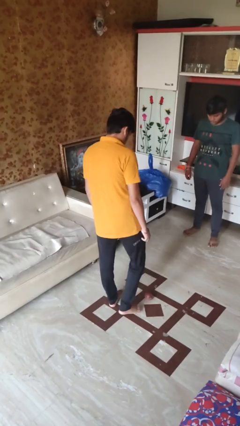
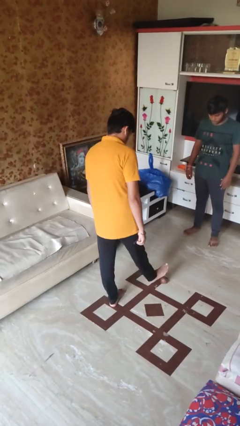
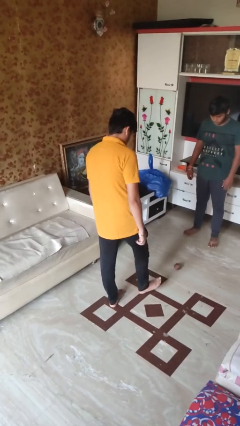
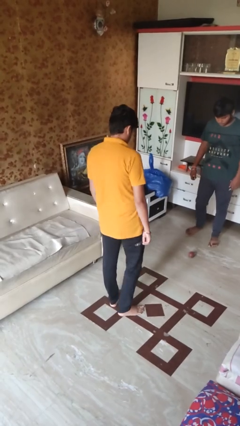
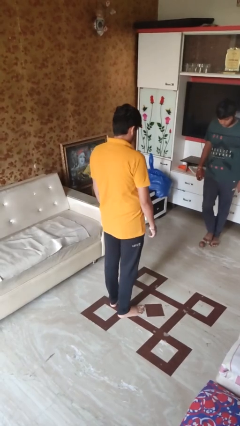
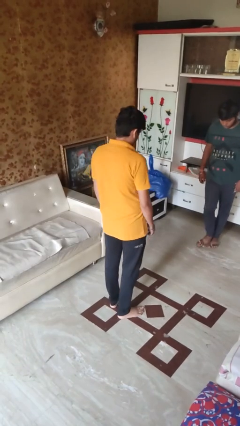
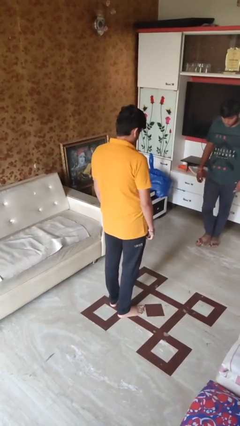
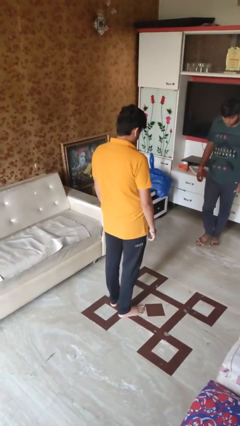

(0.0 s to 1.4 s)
person kicks object to person

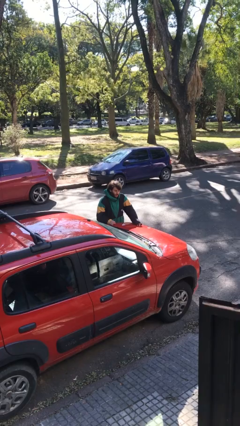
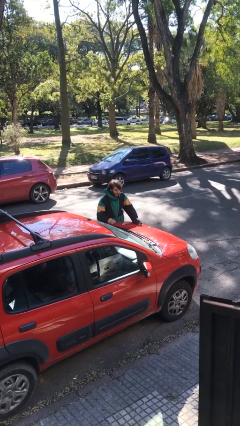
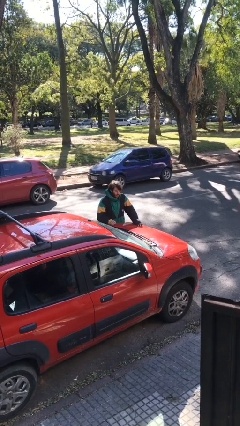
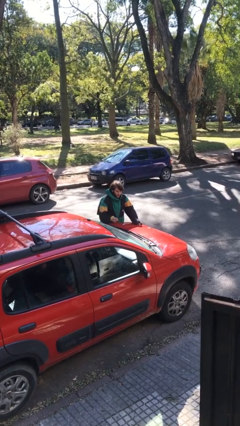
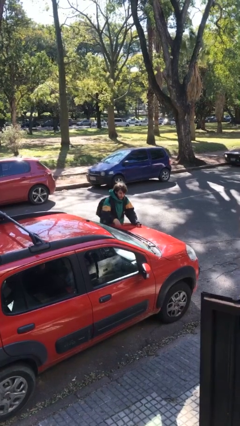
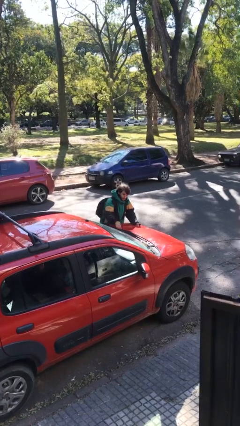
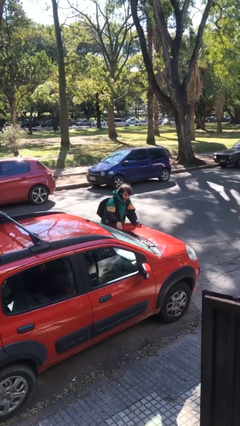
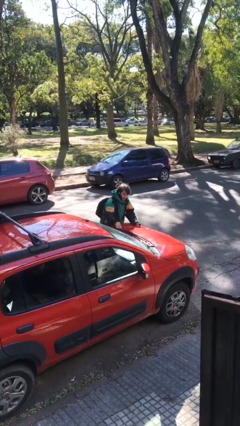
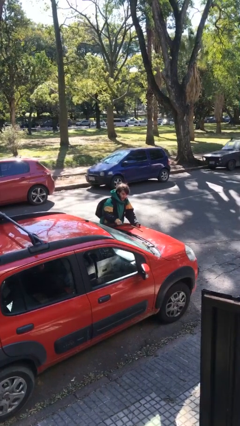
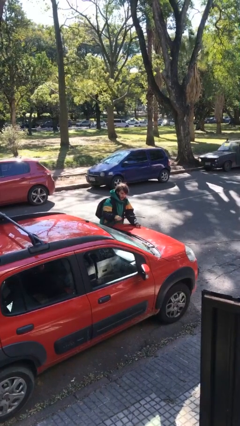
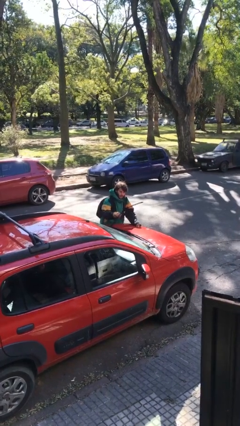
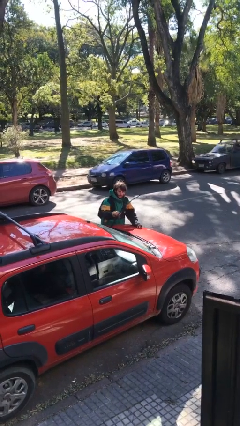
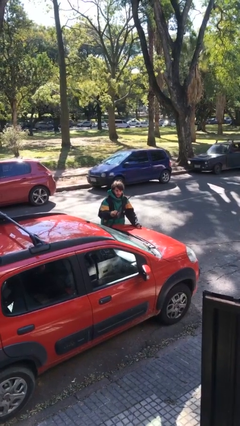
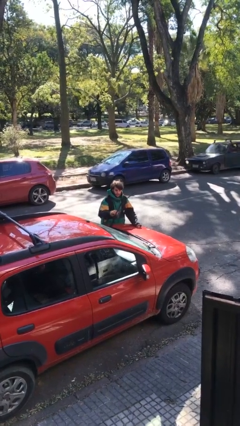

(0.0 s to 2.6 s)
person flips up car wipers

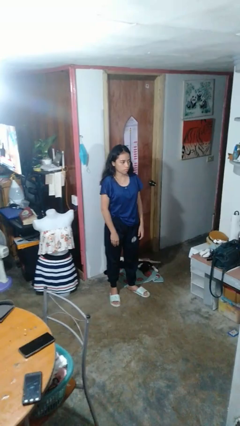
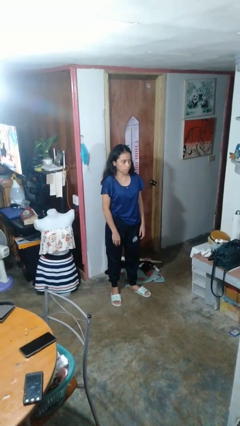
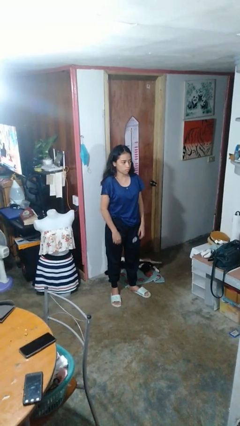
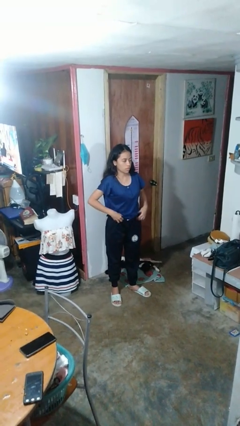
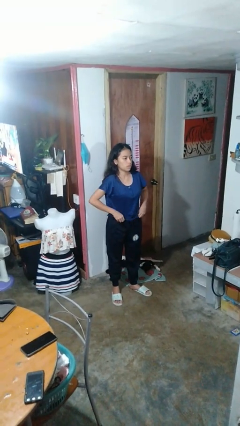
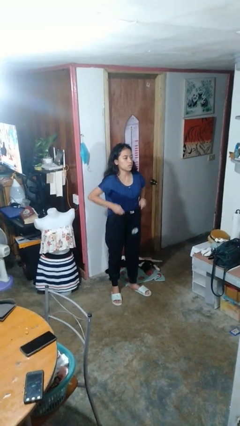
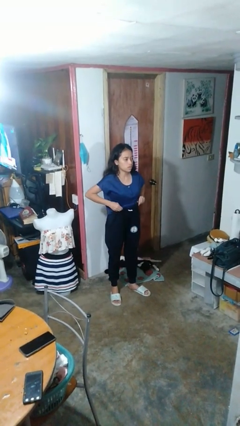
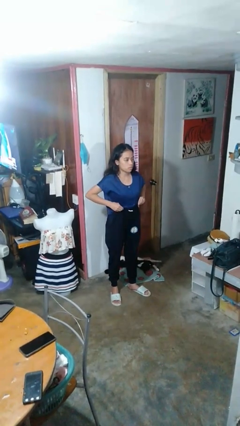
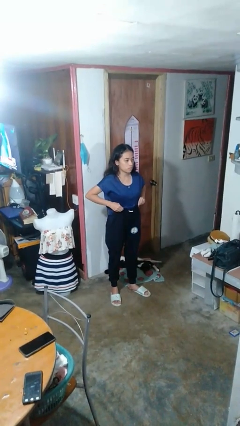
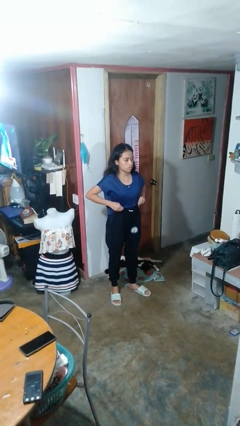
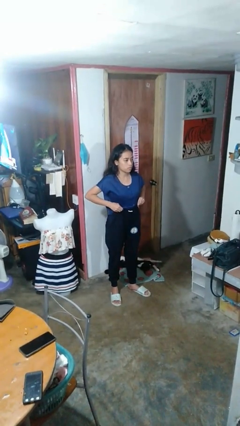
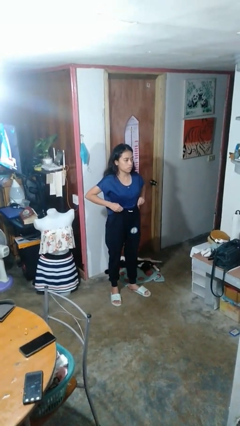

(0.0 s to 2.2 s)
person hikes up pants

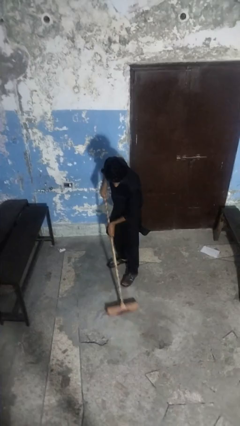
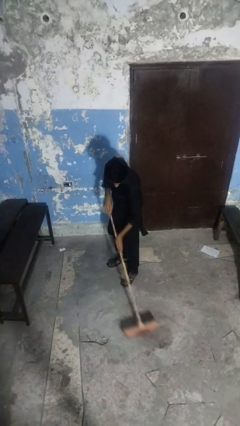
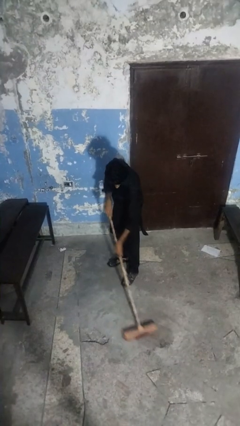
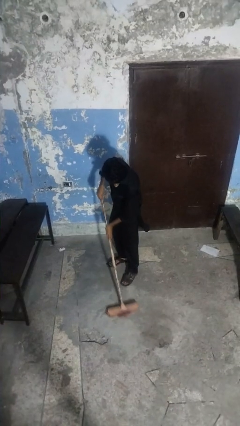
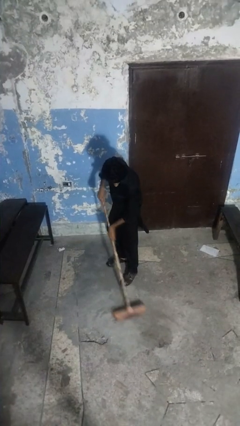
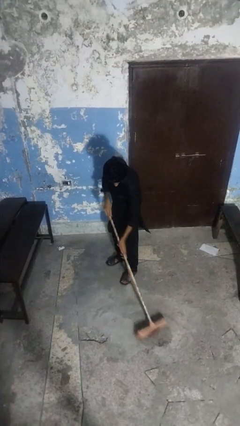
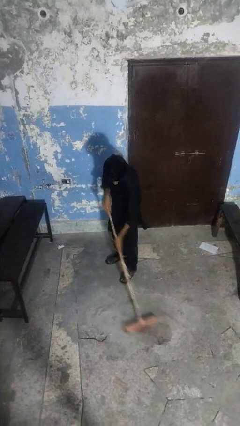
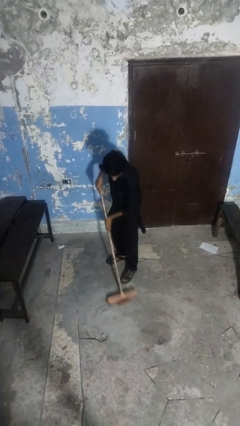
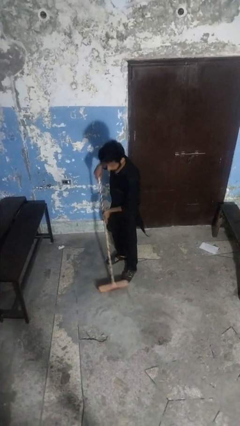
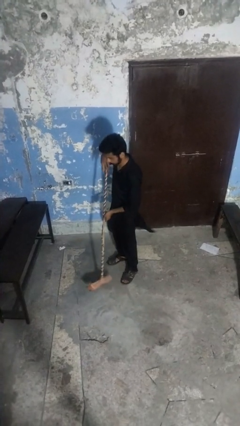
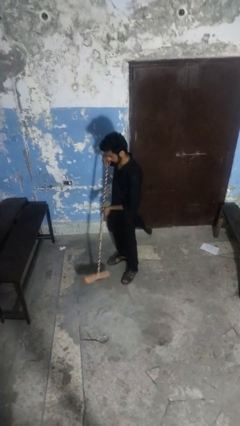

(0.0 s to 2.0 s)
person sweeps floor

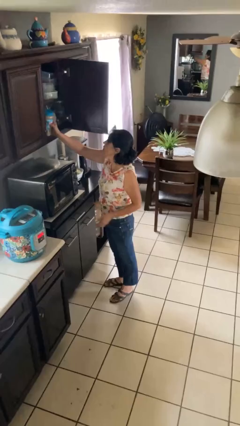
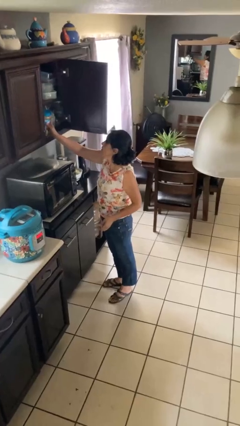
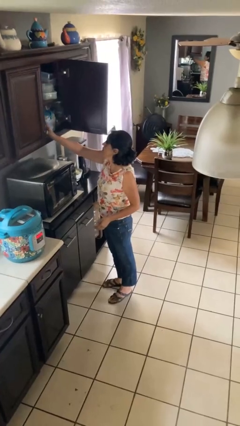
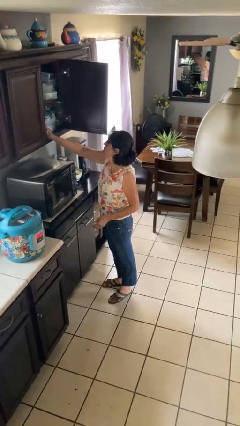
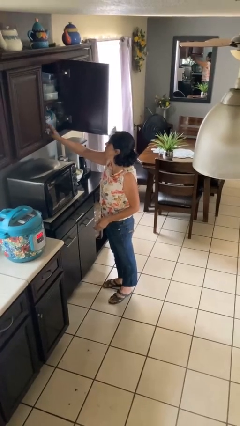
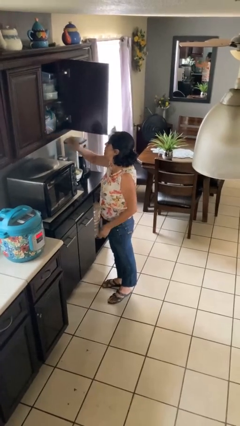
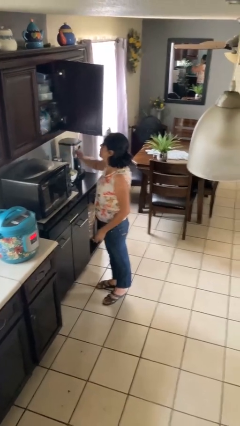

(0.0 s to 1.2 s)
person puts down object into cabinet

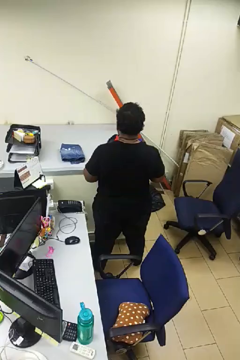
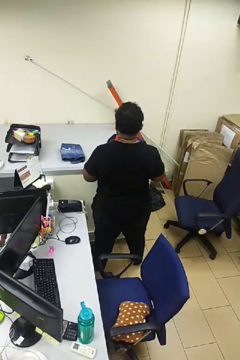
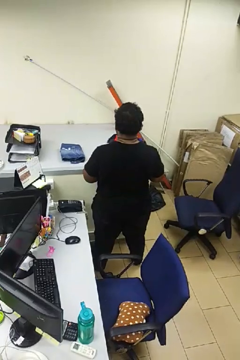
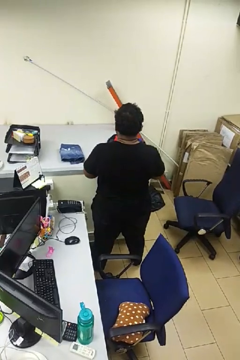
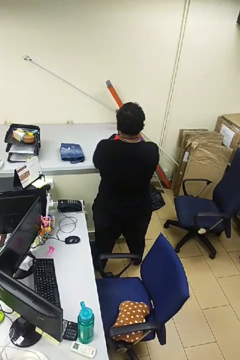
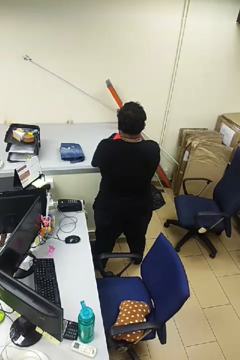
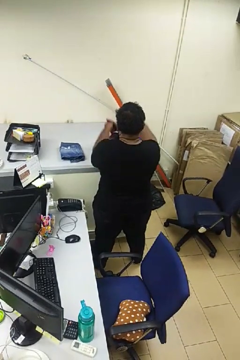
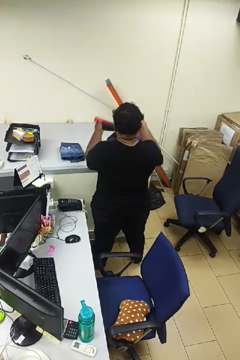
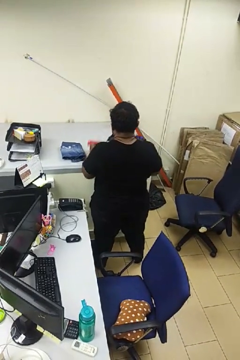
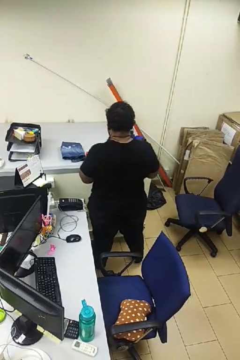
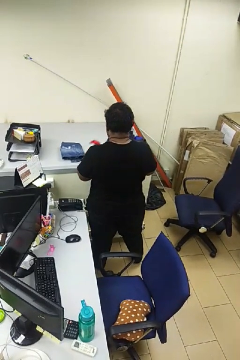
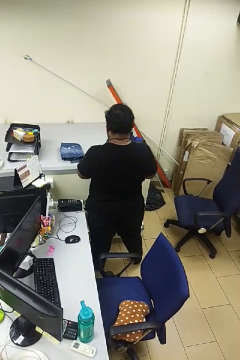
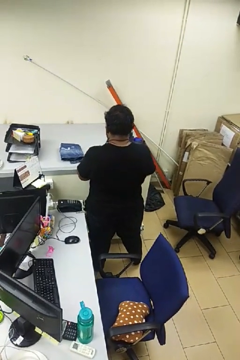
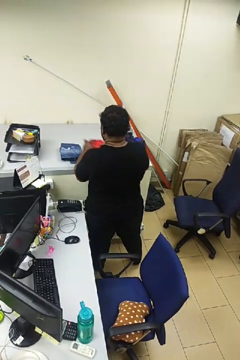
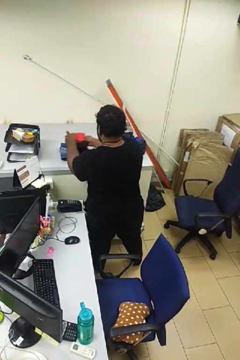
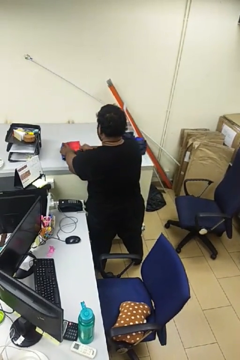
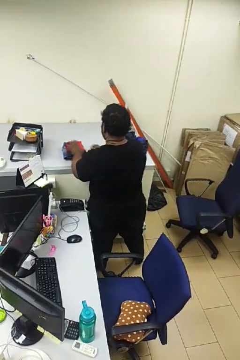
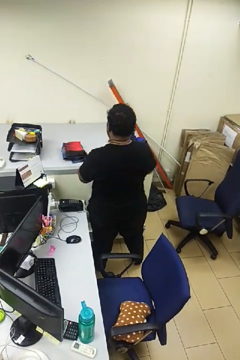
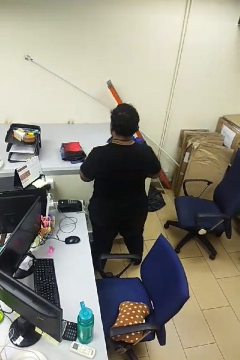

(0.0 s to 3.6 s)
person folds shirt

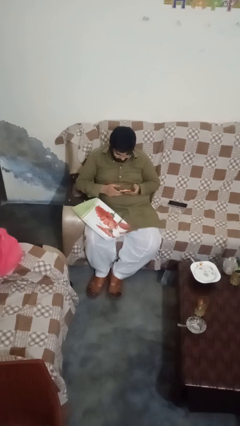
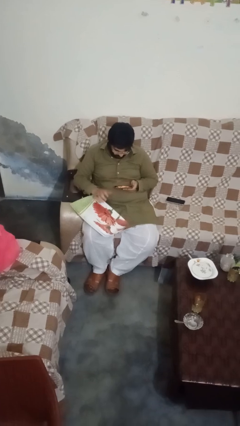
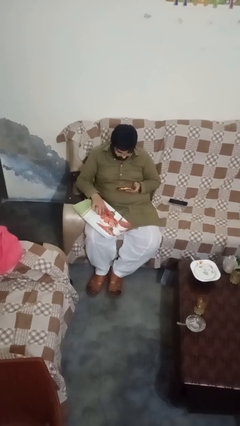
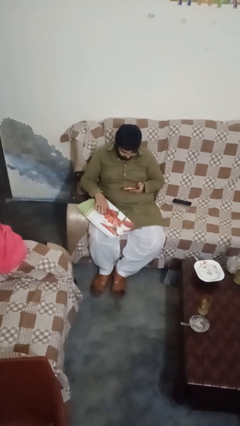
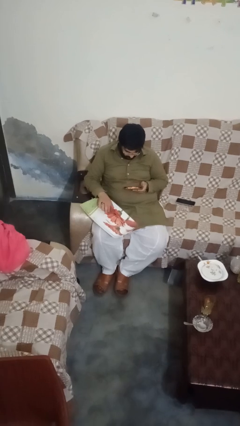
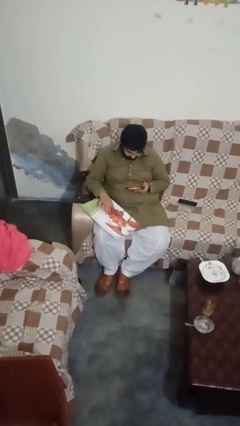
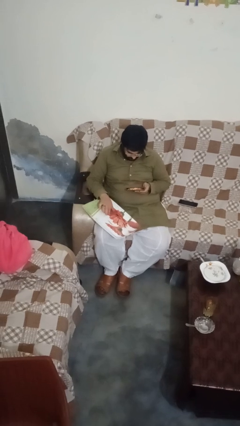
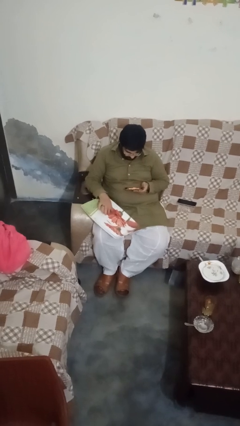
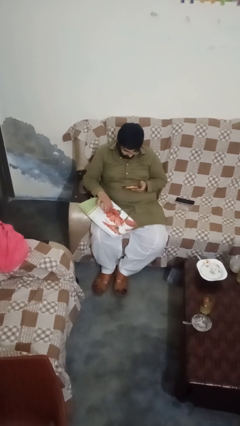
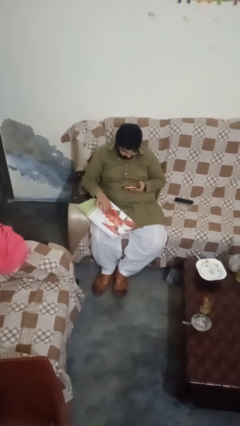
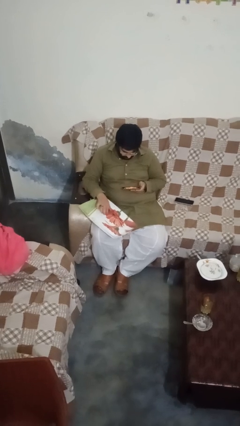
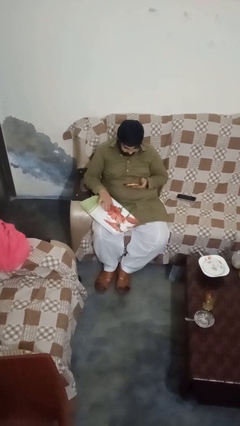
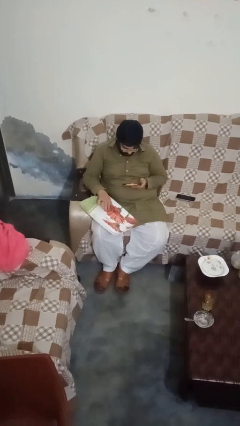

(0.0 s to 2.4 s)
person taps object with finger

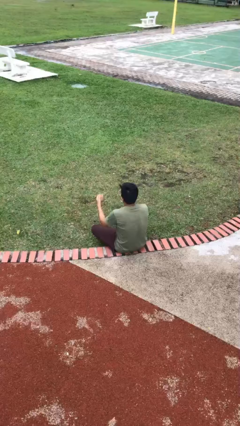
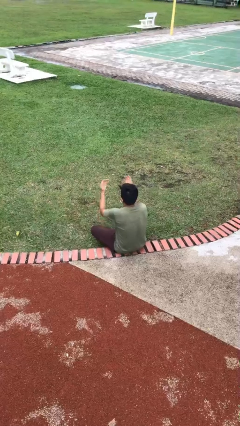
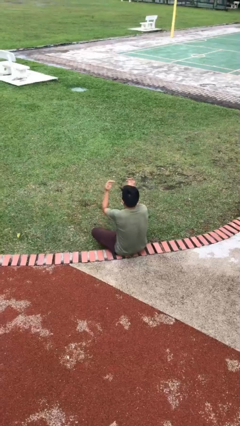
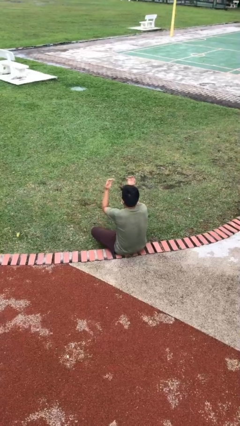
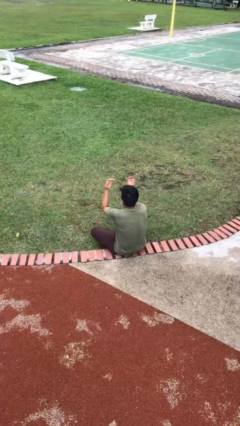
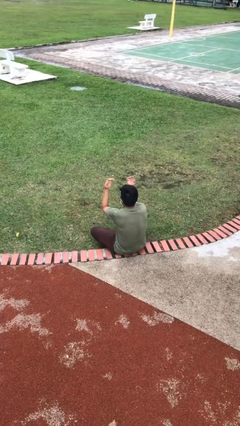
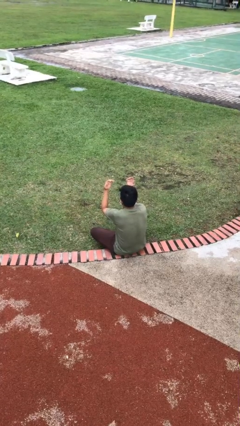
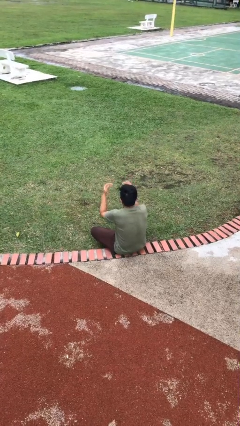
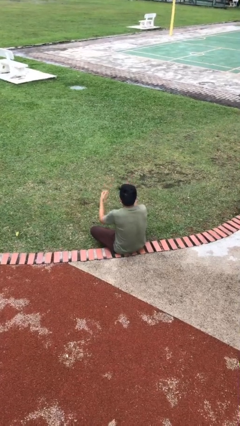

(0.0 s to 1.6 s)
person prays

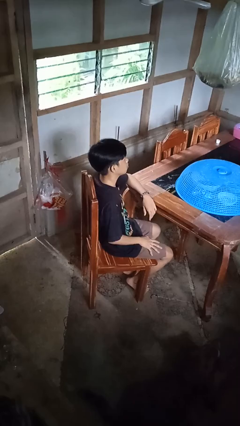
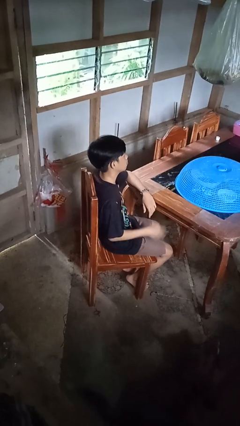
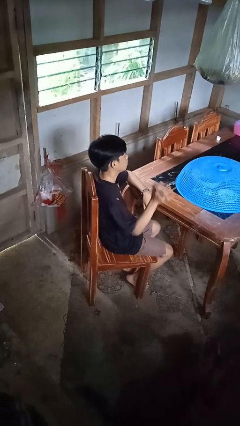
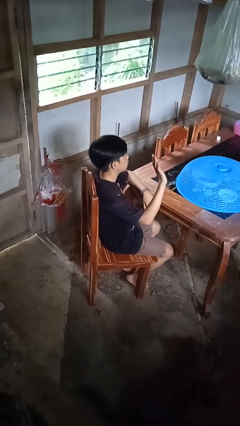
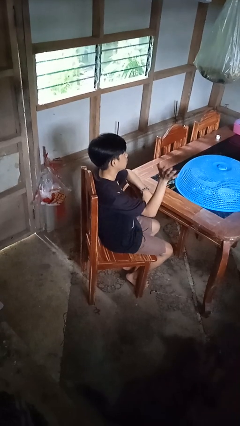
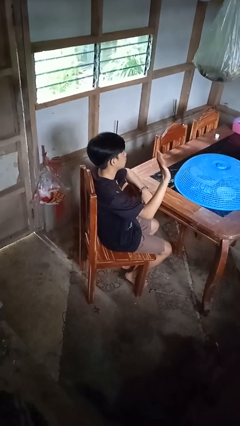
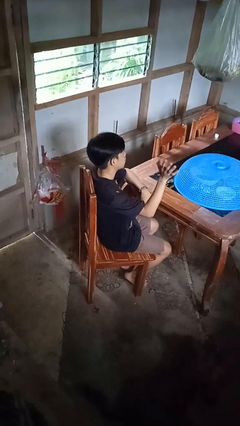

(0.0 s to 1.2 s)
person waves at person
